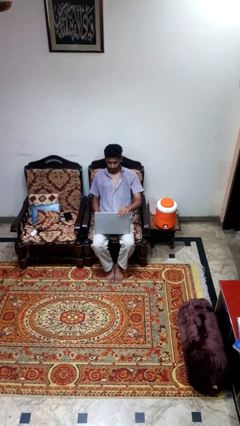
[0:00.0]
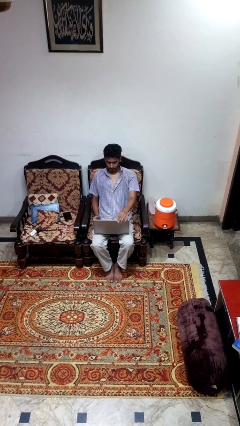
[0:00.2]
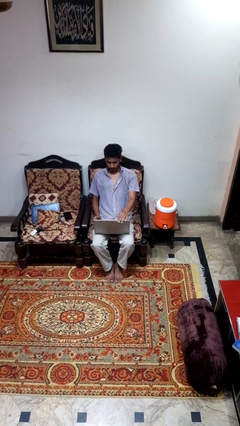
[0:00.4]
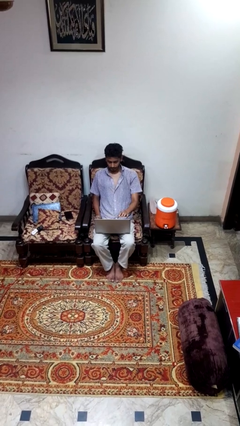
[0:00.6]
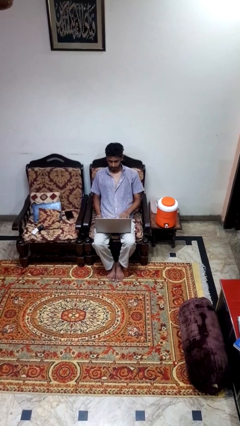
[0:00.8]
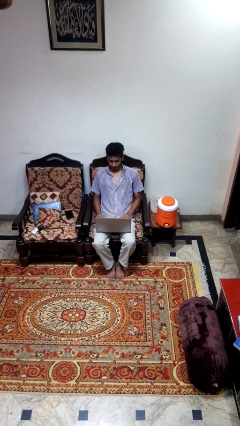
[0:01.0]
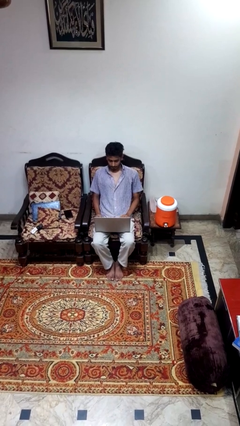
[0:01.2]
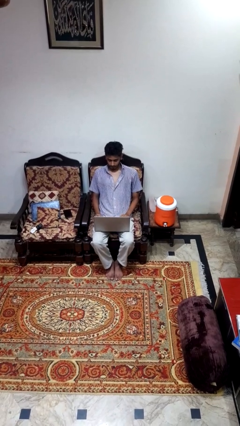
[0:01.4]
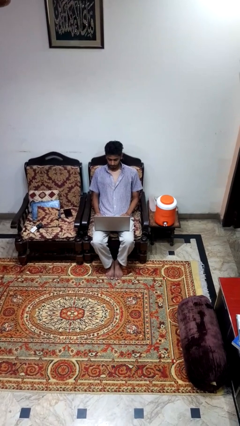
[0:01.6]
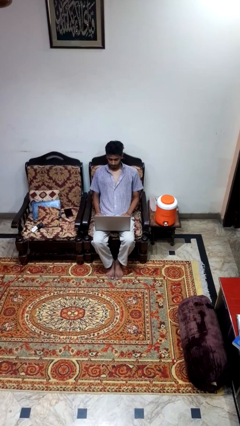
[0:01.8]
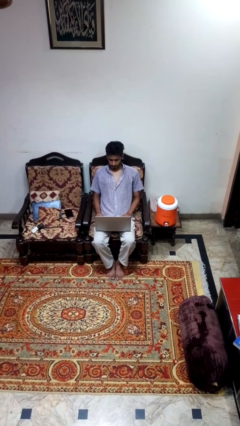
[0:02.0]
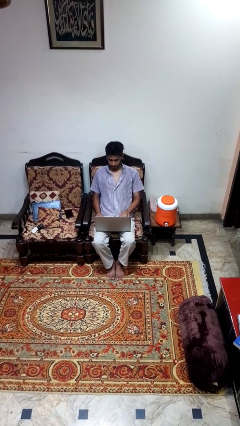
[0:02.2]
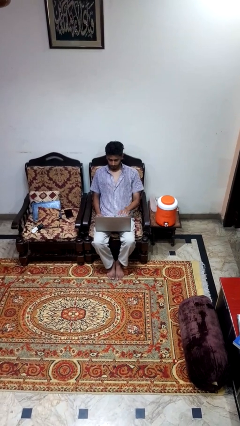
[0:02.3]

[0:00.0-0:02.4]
person opens laptop

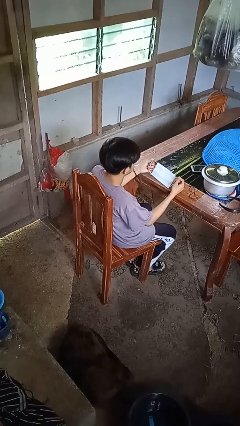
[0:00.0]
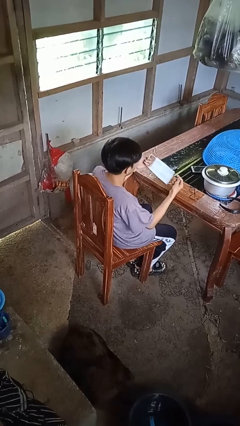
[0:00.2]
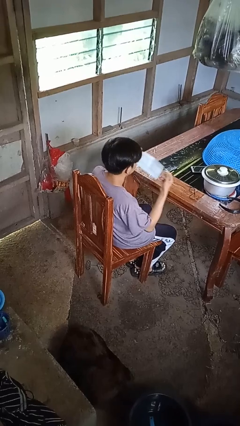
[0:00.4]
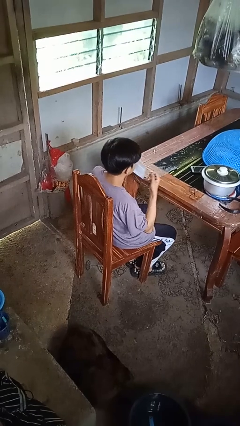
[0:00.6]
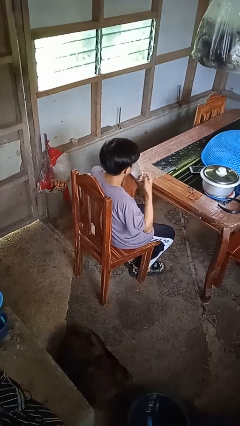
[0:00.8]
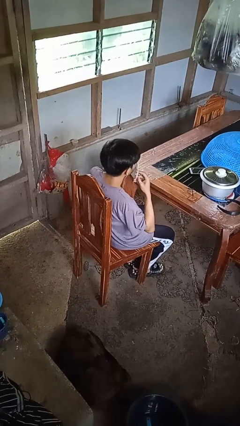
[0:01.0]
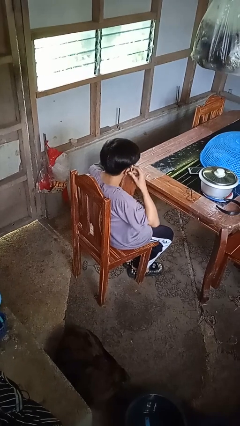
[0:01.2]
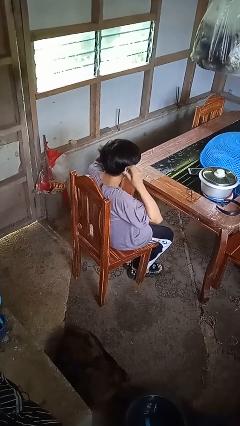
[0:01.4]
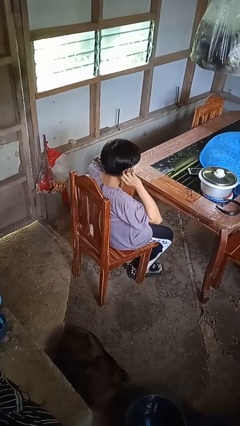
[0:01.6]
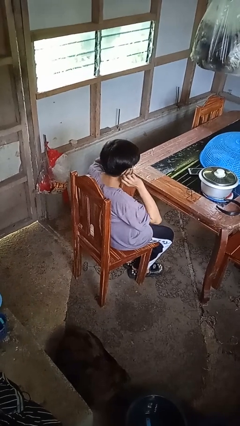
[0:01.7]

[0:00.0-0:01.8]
person puts on facemask

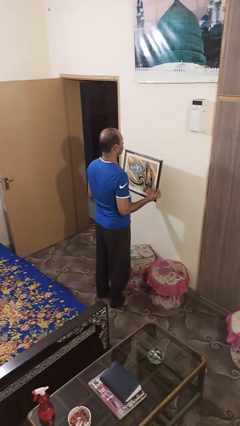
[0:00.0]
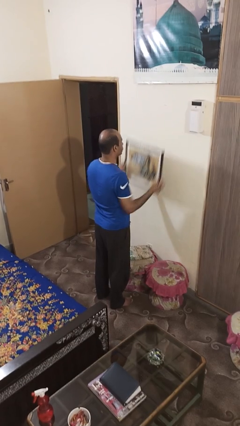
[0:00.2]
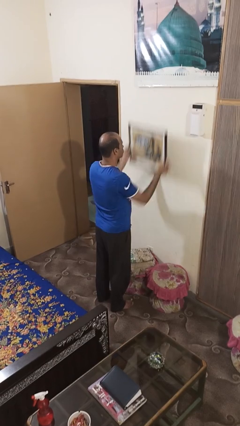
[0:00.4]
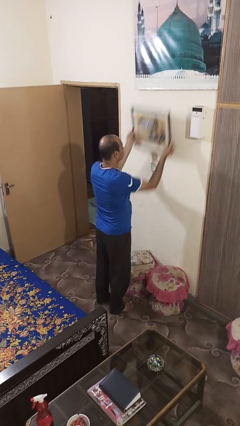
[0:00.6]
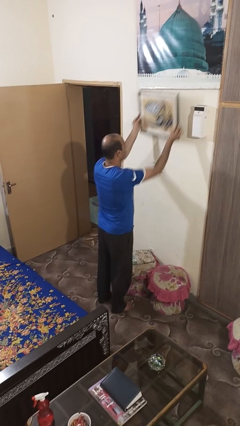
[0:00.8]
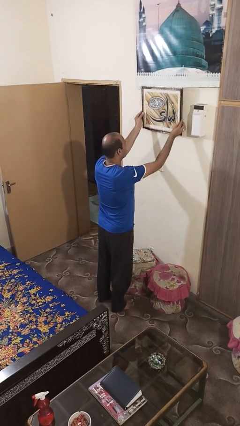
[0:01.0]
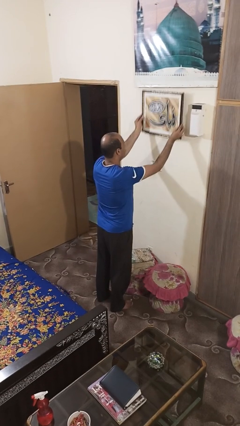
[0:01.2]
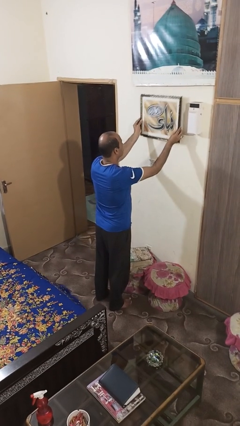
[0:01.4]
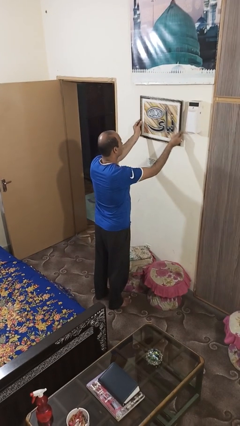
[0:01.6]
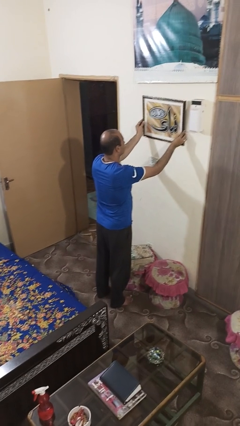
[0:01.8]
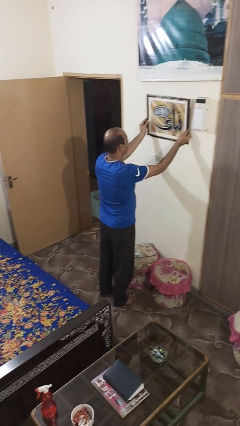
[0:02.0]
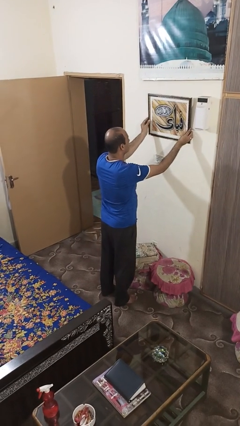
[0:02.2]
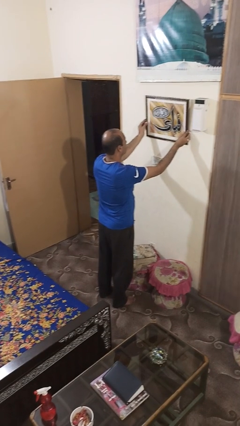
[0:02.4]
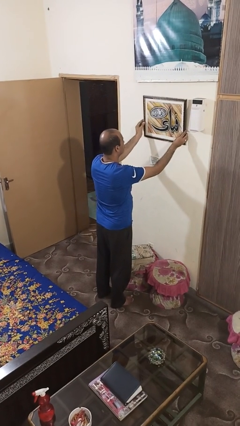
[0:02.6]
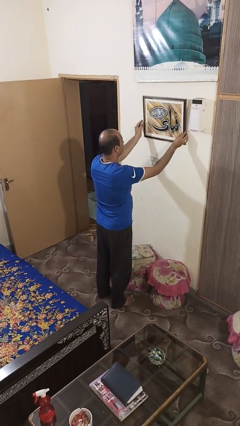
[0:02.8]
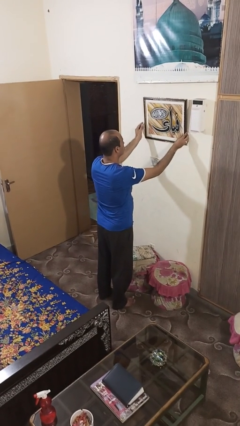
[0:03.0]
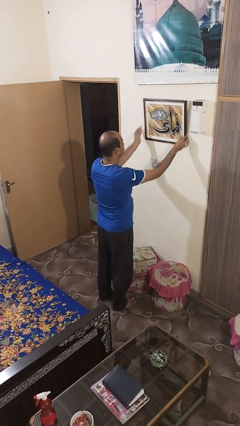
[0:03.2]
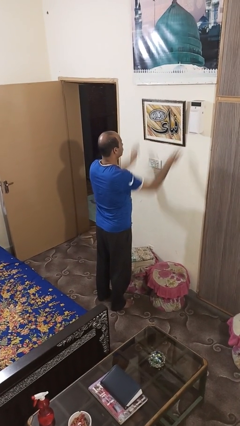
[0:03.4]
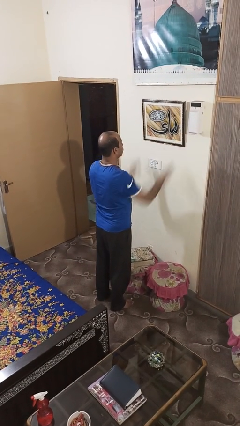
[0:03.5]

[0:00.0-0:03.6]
person puts up picture frame

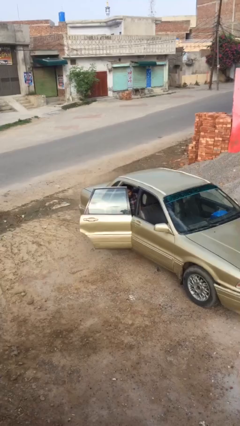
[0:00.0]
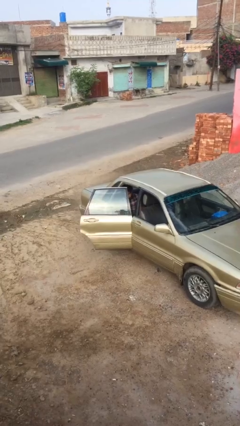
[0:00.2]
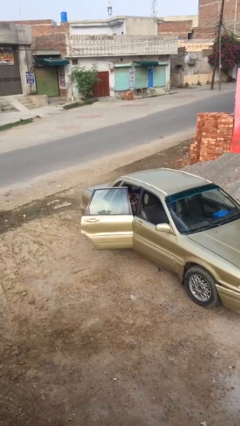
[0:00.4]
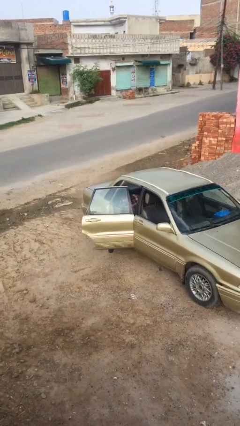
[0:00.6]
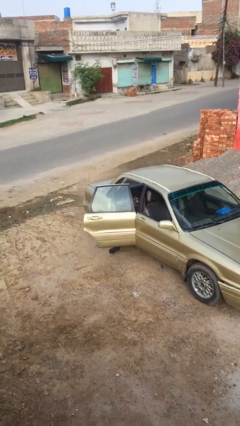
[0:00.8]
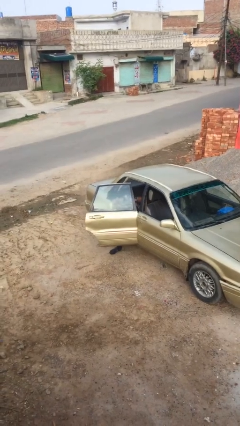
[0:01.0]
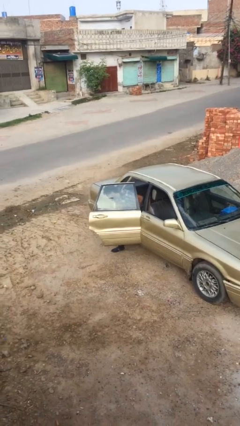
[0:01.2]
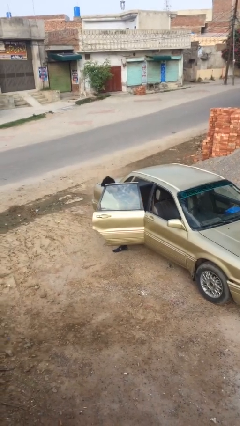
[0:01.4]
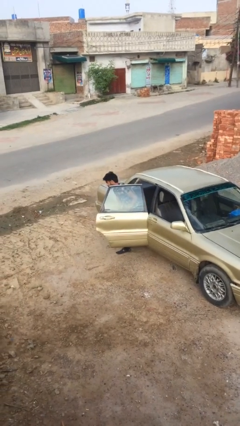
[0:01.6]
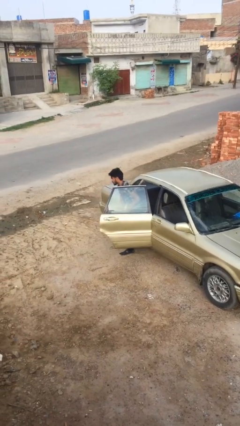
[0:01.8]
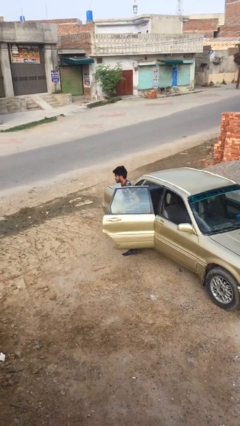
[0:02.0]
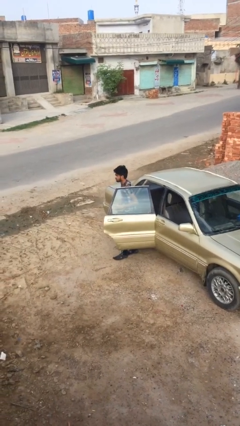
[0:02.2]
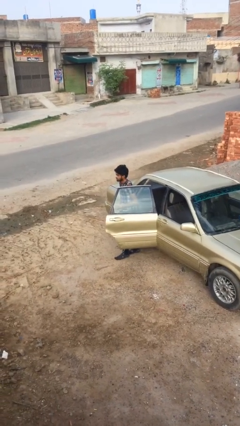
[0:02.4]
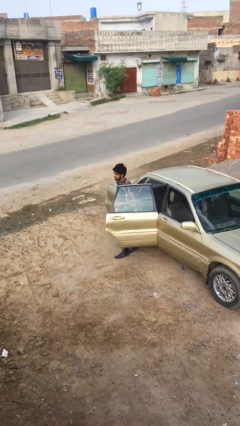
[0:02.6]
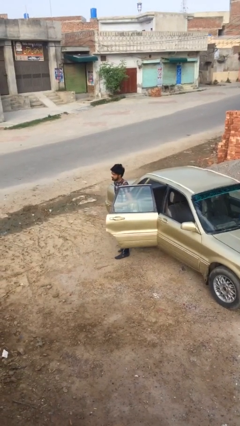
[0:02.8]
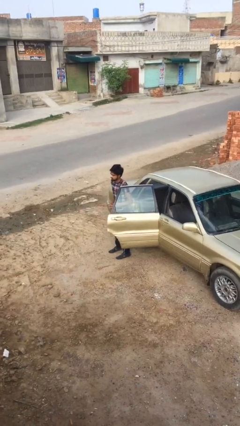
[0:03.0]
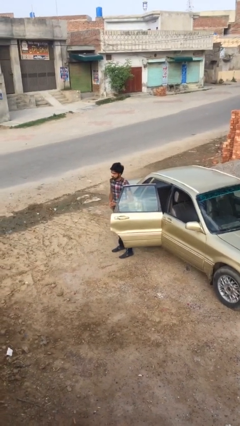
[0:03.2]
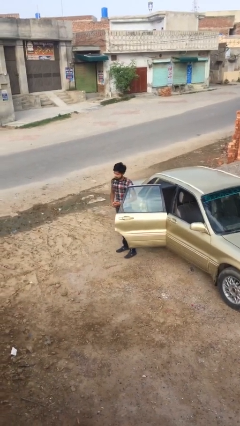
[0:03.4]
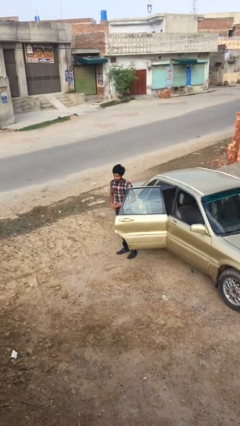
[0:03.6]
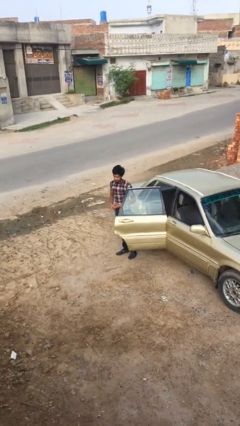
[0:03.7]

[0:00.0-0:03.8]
person exits car

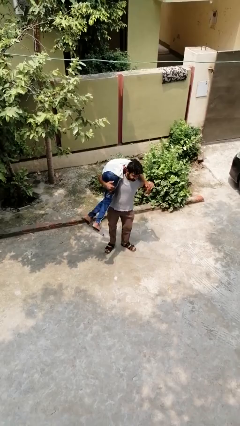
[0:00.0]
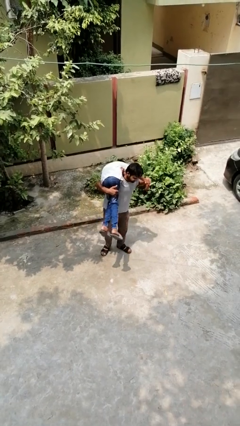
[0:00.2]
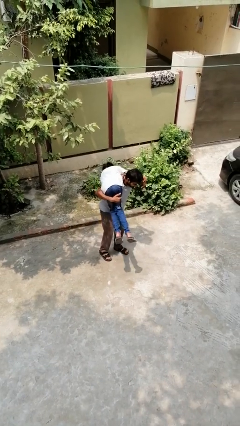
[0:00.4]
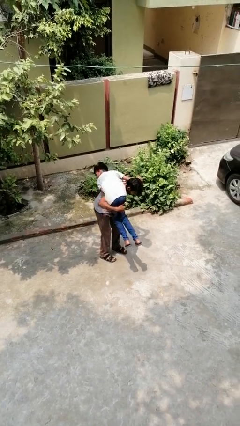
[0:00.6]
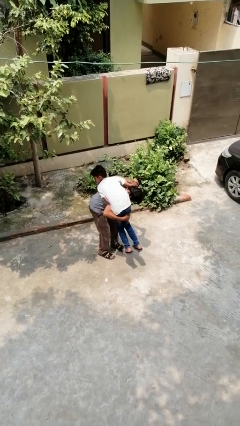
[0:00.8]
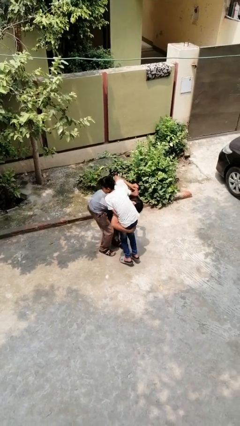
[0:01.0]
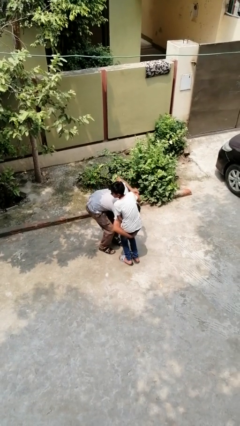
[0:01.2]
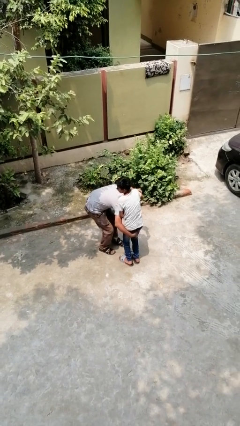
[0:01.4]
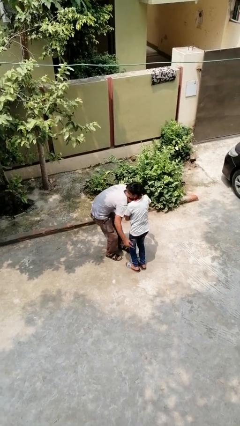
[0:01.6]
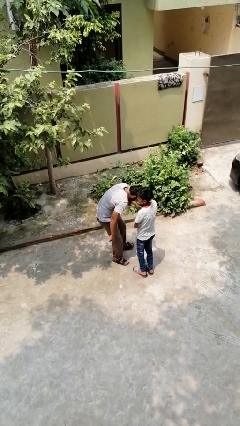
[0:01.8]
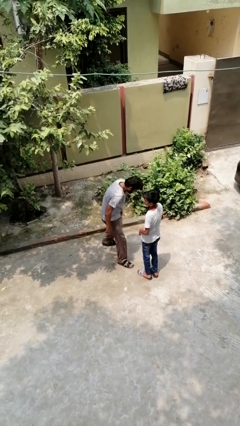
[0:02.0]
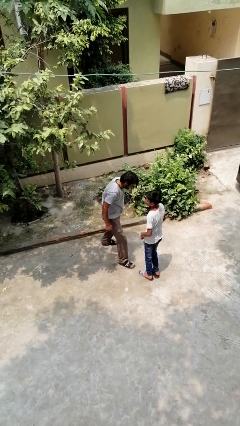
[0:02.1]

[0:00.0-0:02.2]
person puts down person

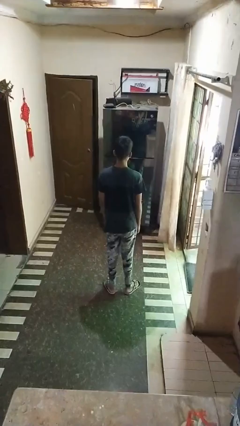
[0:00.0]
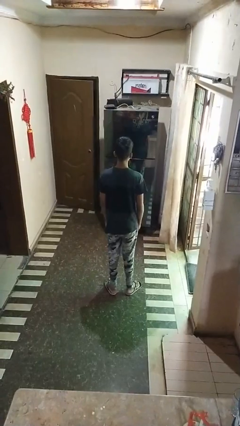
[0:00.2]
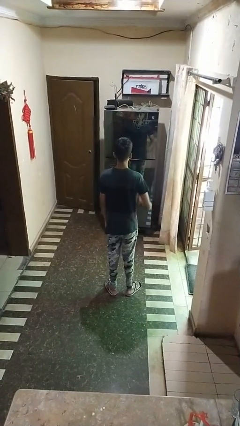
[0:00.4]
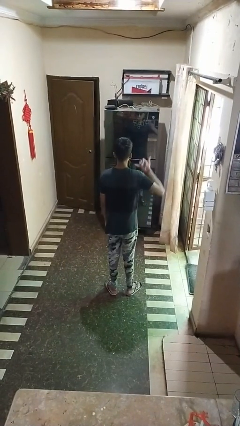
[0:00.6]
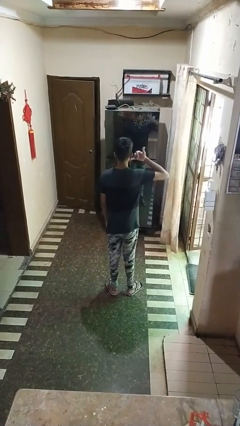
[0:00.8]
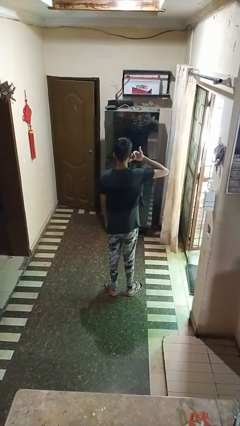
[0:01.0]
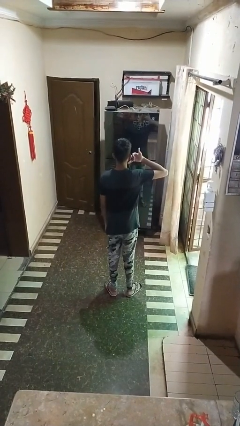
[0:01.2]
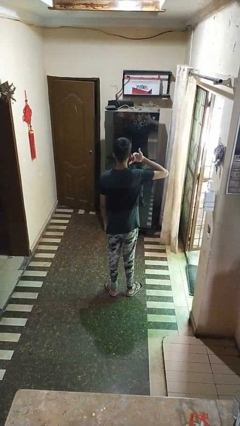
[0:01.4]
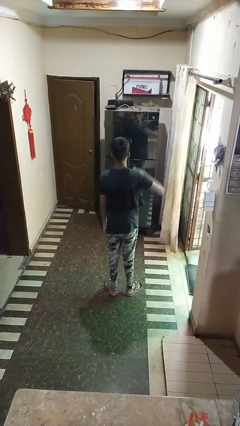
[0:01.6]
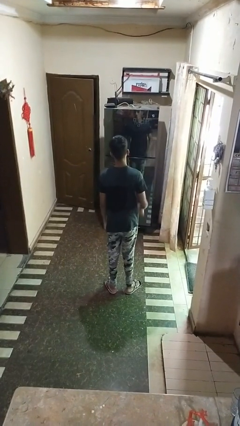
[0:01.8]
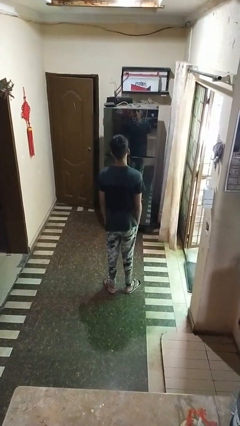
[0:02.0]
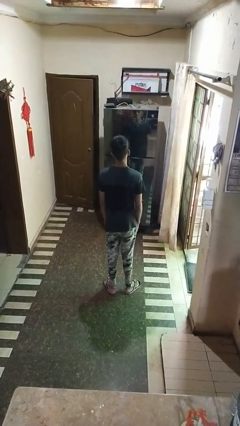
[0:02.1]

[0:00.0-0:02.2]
person gestures call me

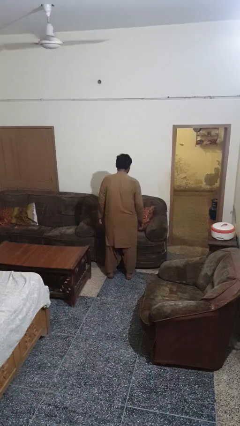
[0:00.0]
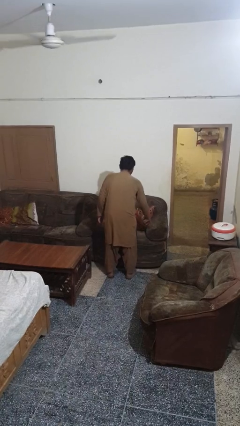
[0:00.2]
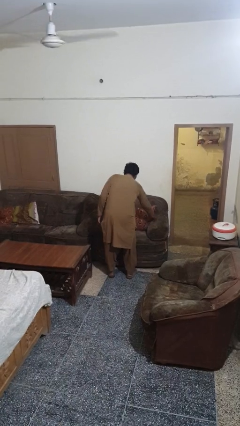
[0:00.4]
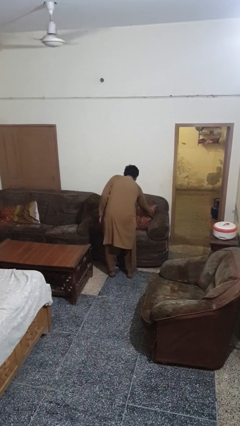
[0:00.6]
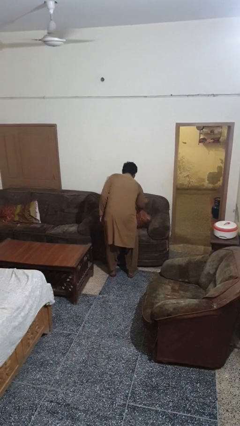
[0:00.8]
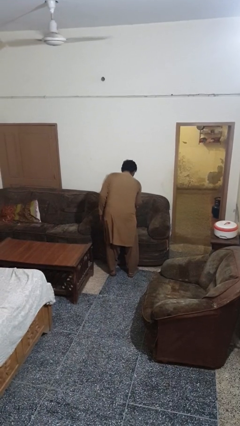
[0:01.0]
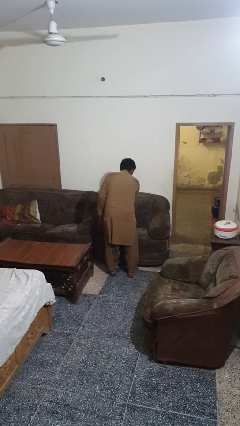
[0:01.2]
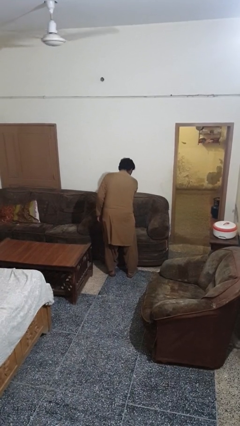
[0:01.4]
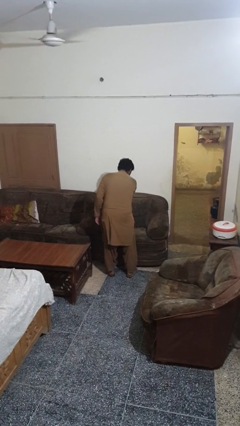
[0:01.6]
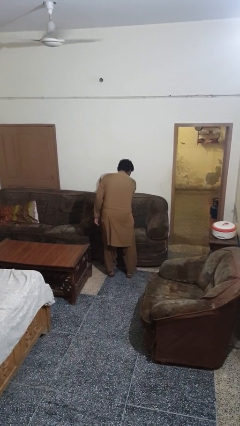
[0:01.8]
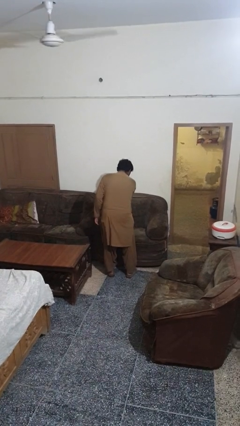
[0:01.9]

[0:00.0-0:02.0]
person searches in couch
